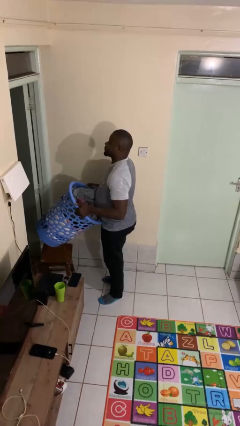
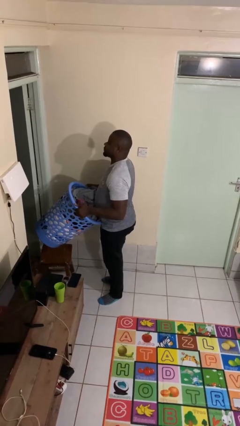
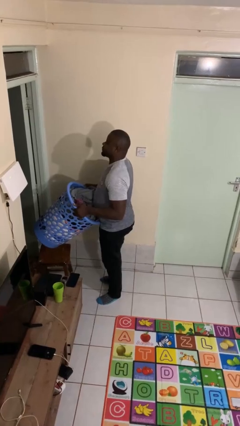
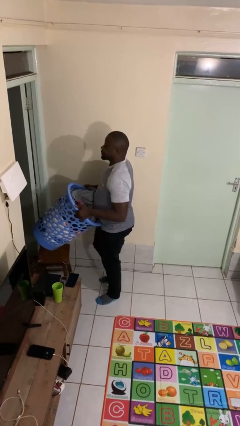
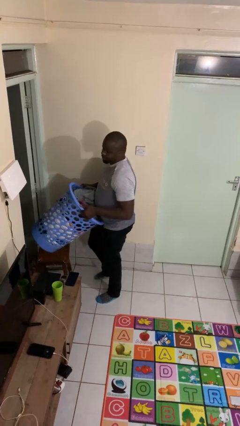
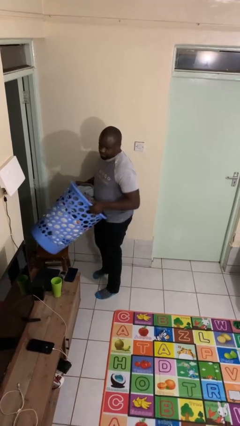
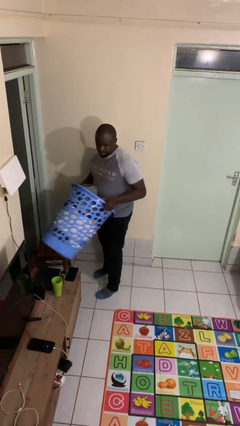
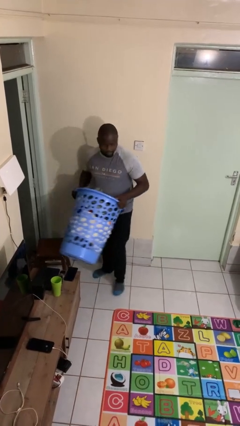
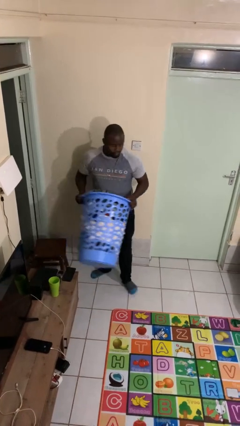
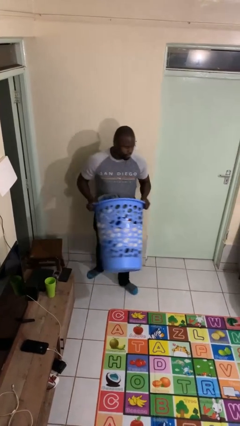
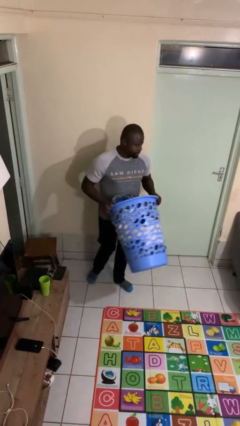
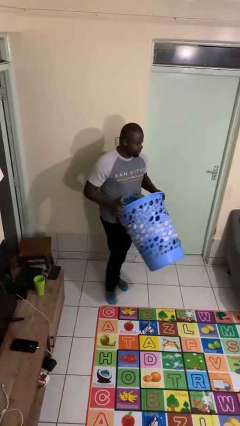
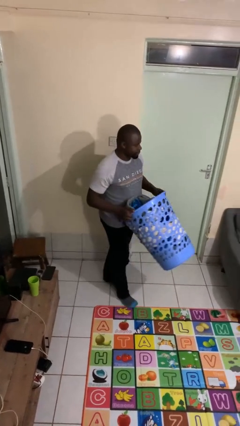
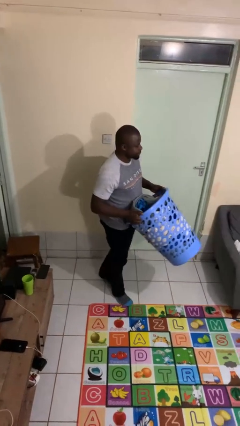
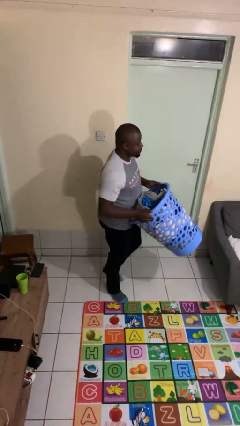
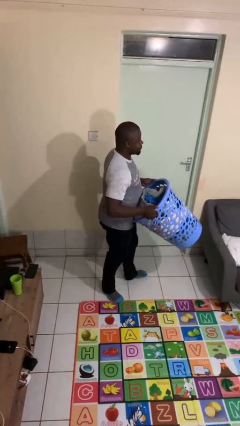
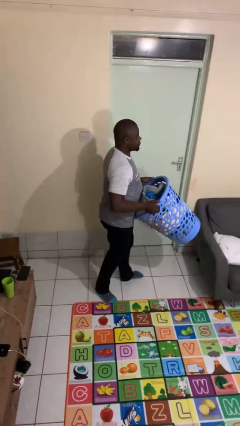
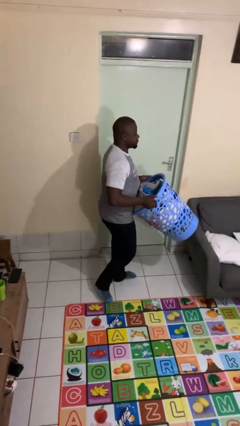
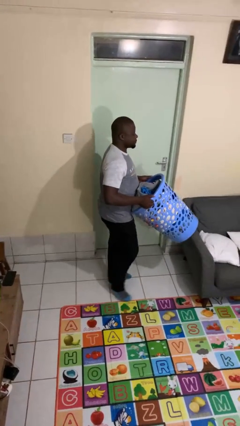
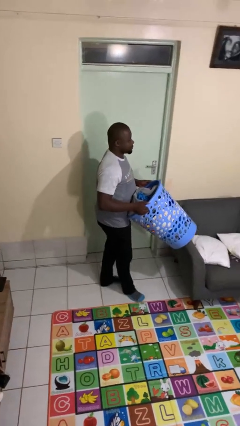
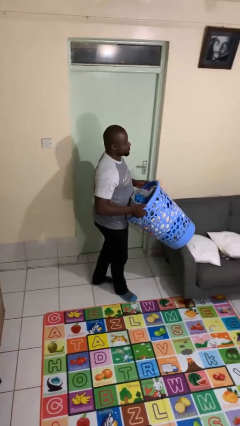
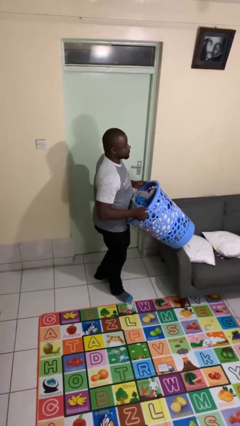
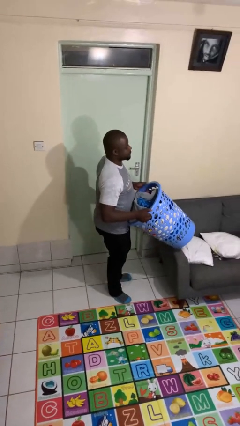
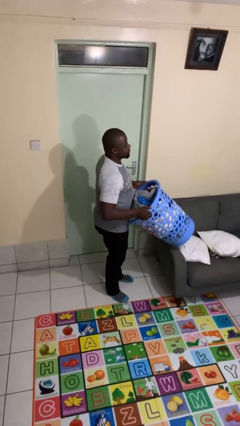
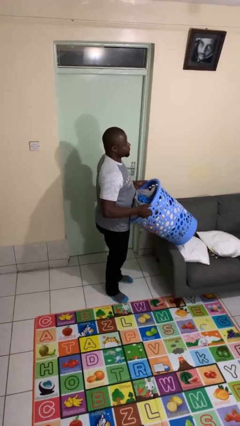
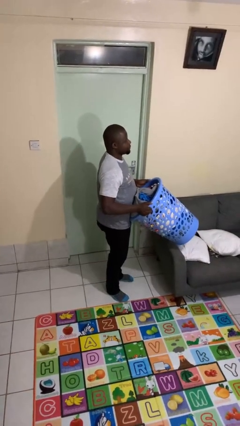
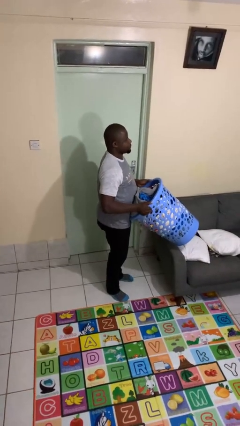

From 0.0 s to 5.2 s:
person carries laundry basket

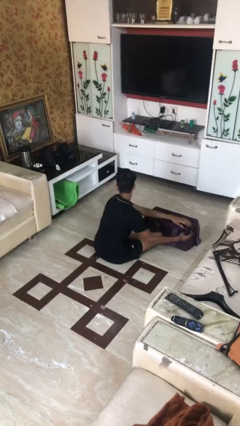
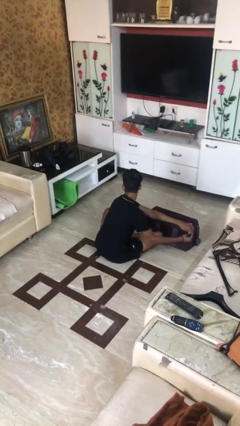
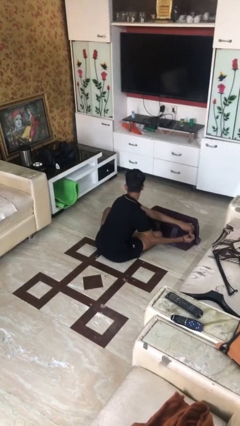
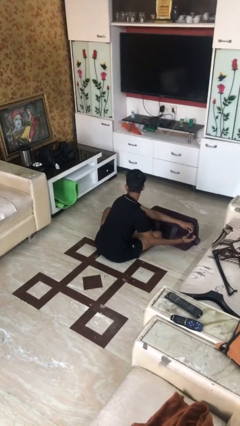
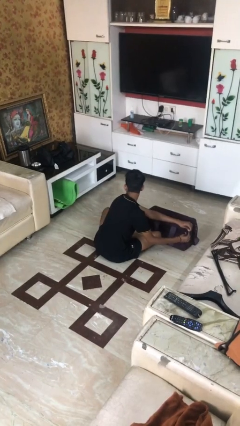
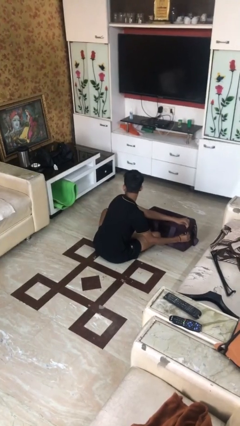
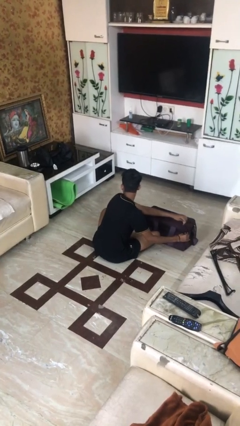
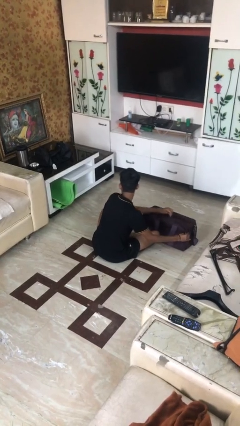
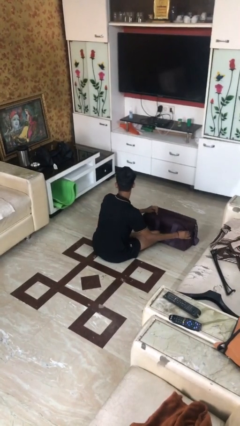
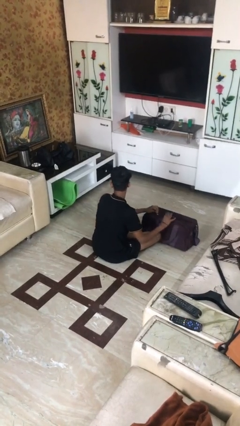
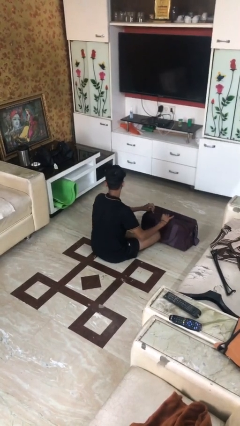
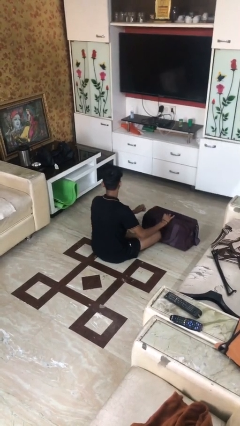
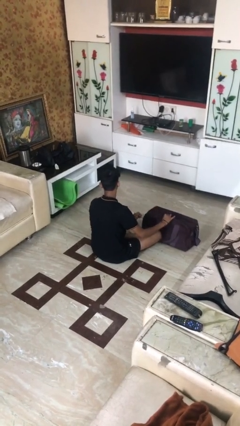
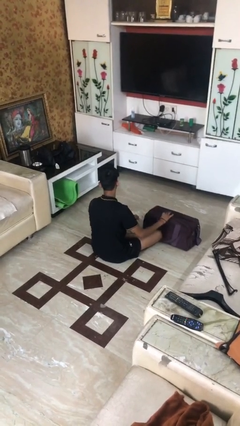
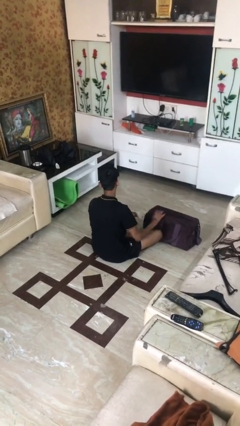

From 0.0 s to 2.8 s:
person closes suitcase

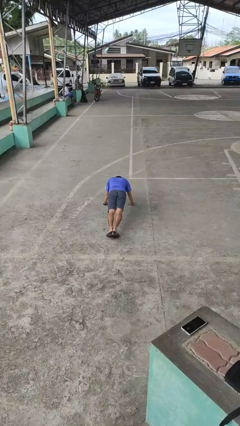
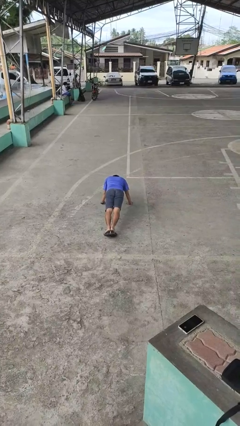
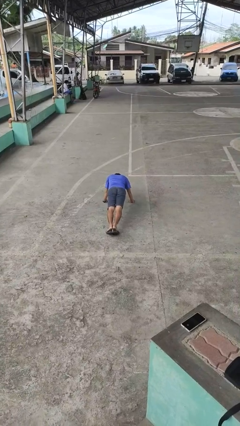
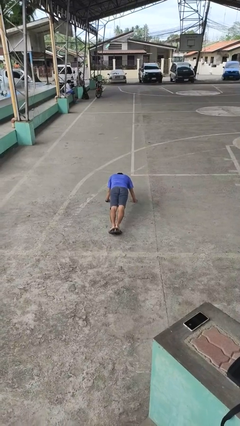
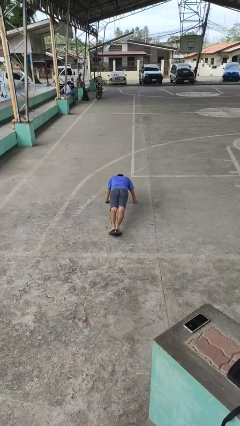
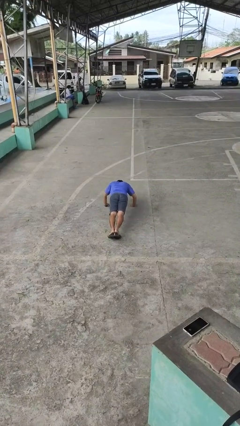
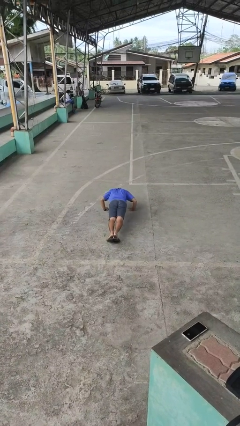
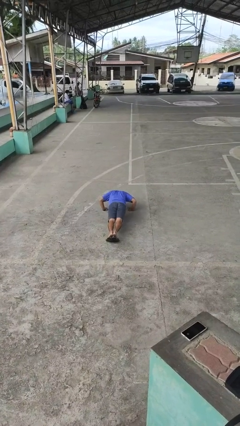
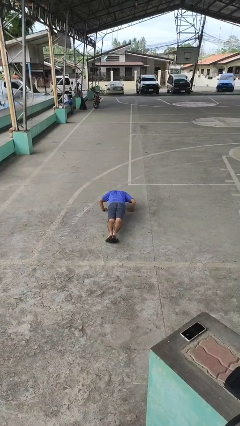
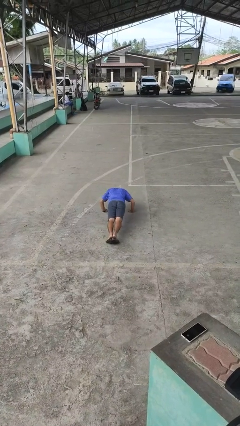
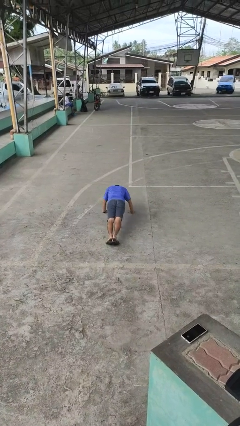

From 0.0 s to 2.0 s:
person exercises with pushup

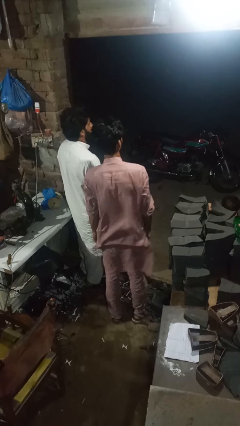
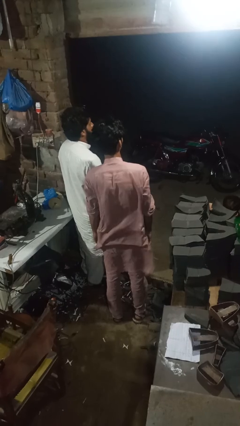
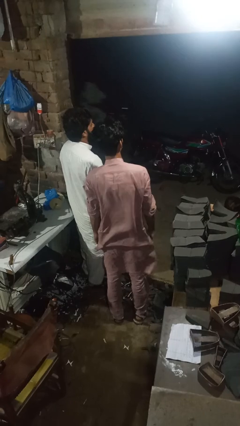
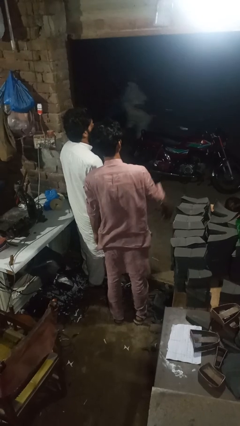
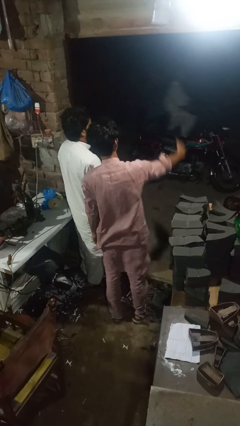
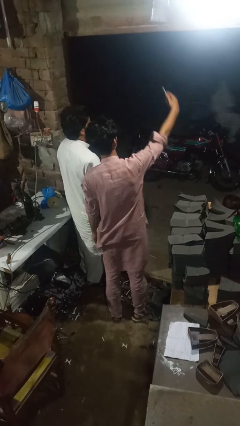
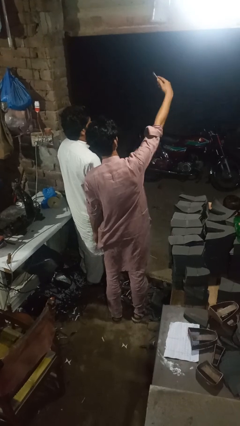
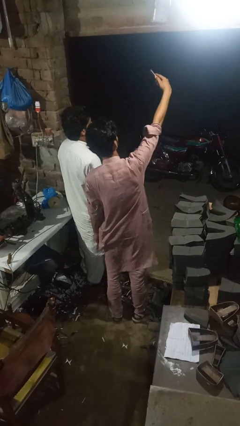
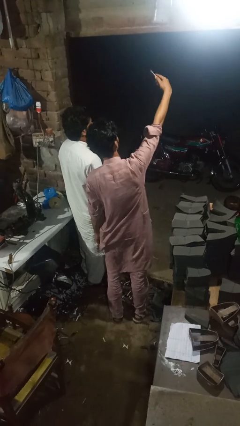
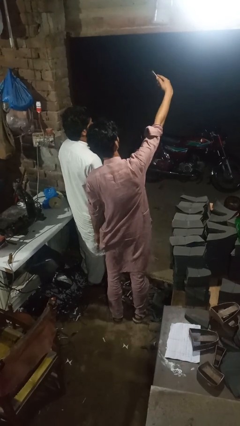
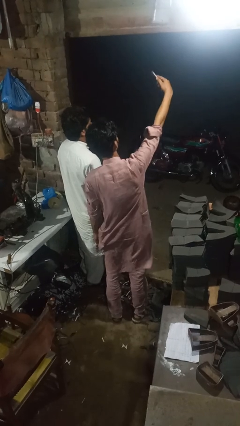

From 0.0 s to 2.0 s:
person takes selfie with person

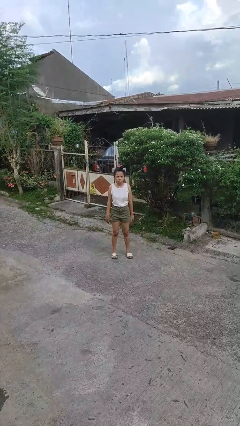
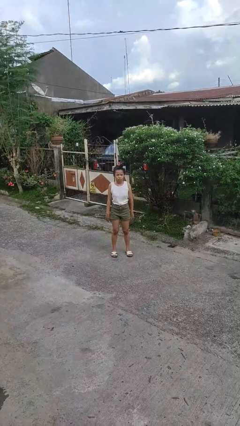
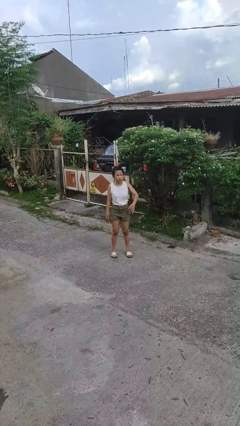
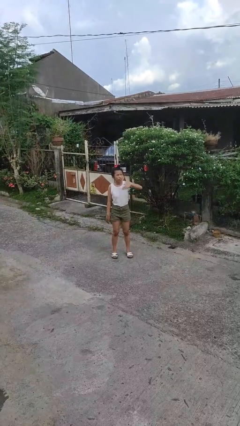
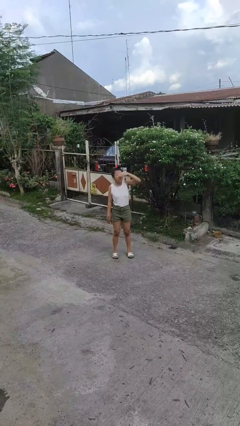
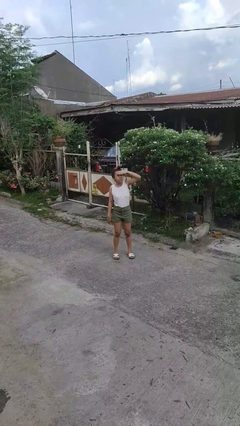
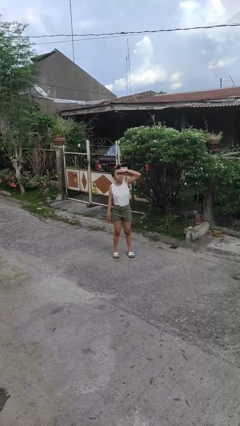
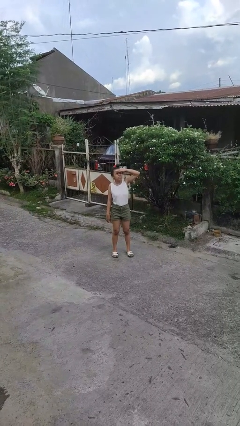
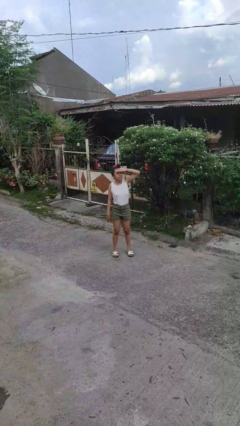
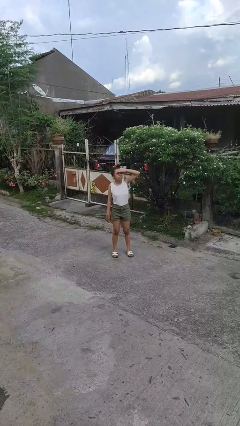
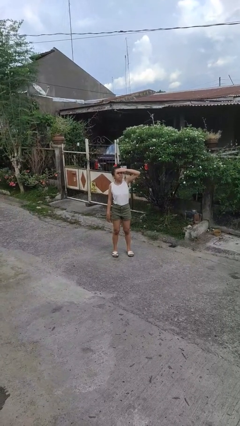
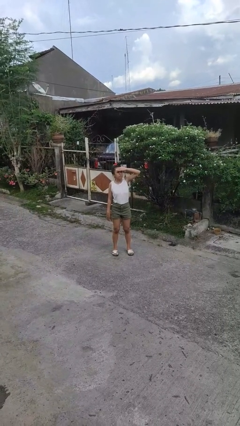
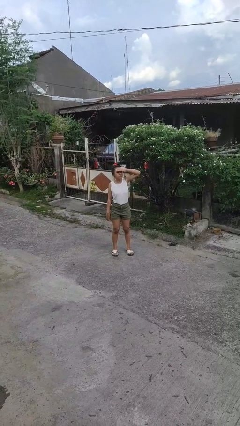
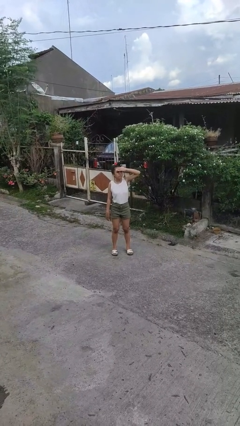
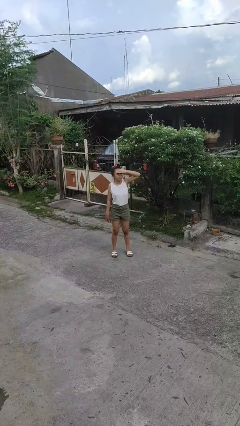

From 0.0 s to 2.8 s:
person shades eyes

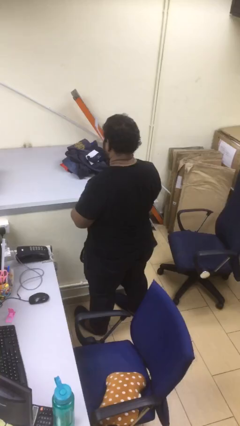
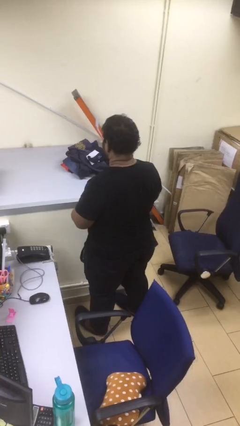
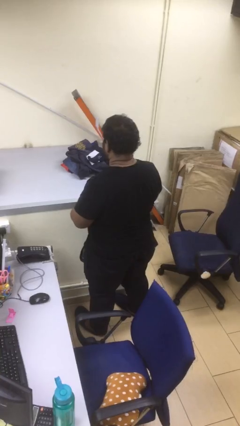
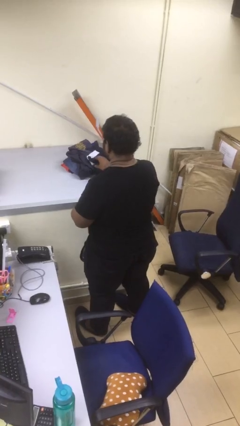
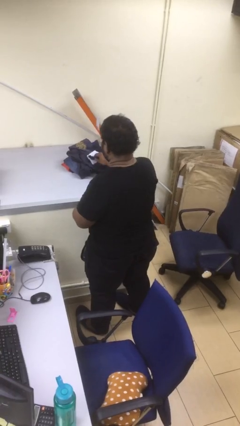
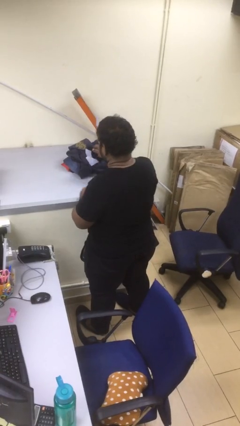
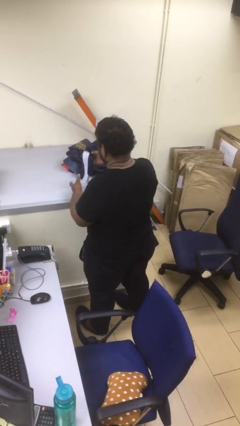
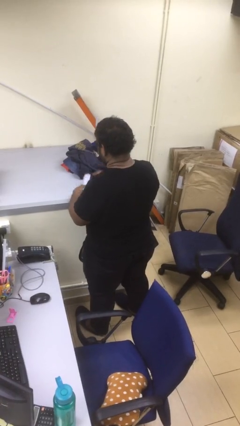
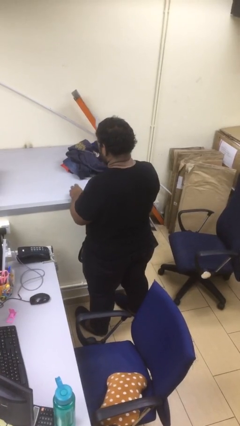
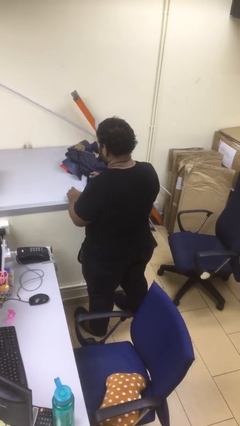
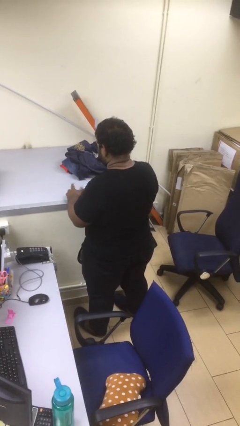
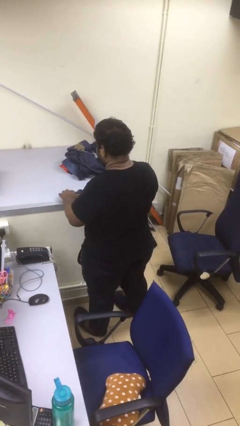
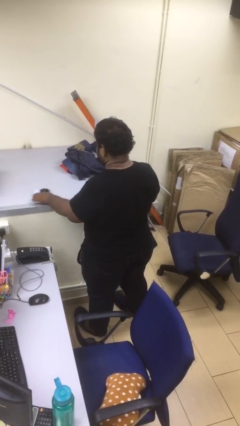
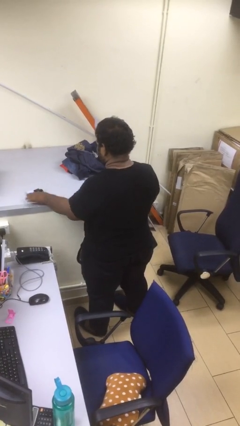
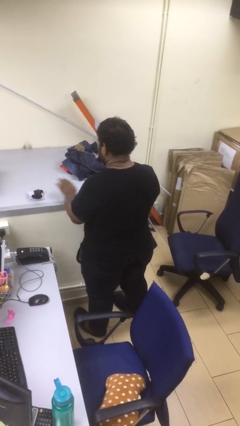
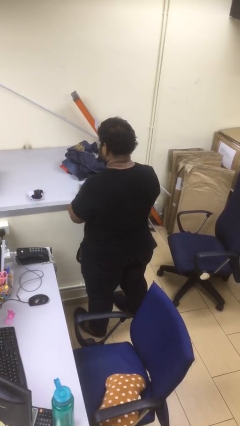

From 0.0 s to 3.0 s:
person folds socks
